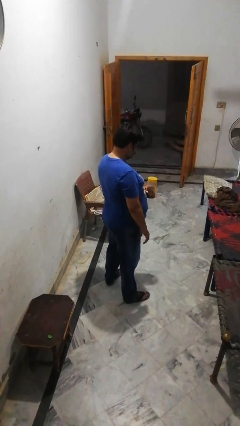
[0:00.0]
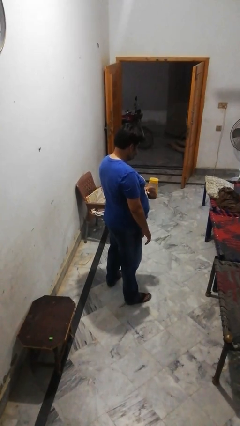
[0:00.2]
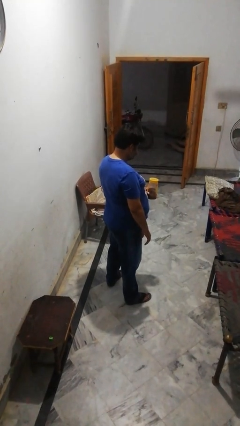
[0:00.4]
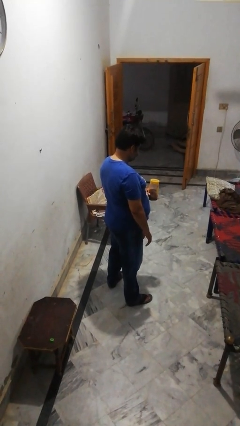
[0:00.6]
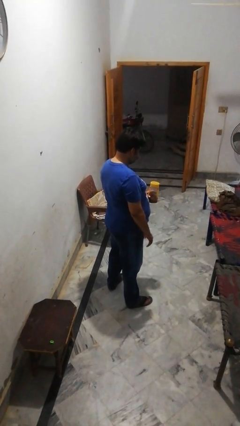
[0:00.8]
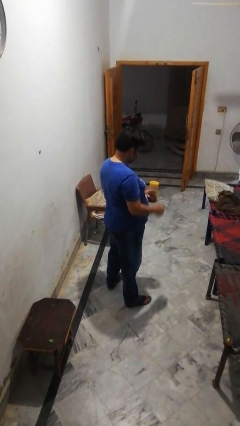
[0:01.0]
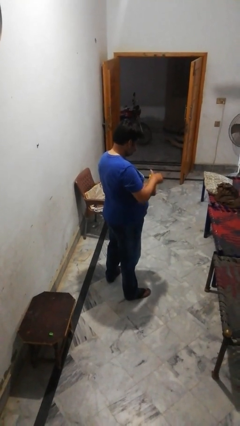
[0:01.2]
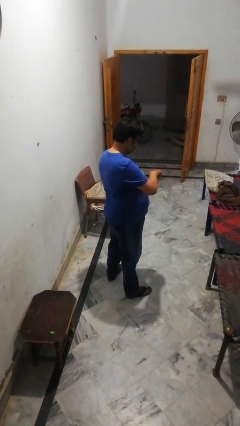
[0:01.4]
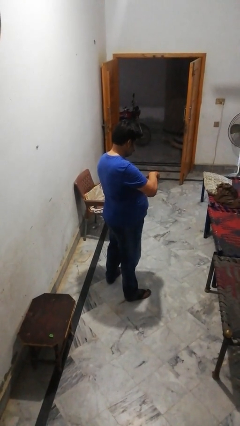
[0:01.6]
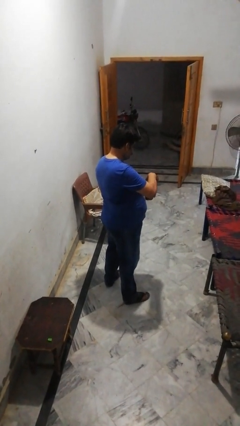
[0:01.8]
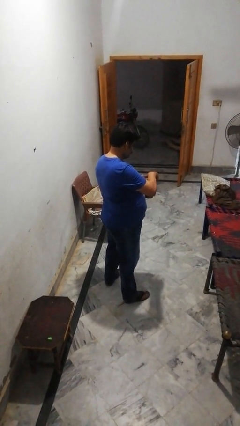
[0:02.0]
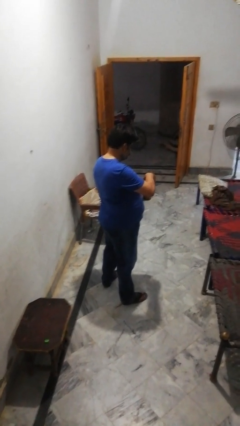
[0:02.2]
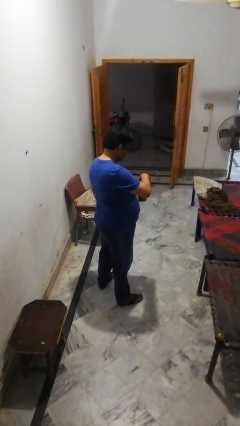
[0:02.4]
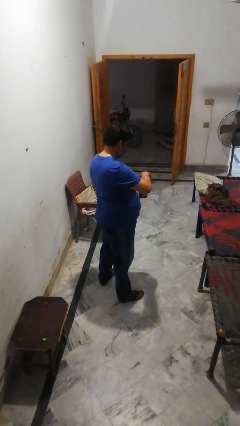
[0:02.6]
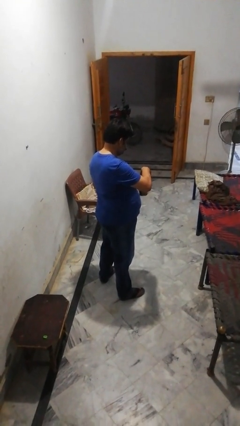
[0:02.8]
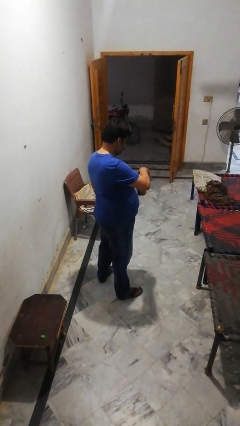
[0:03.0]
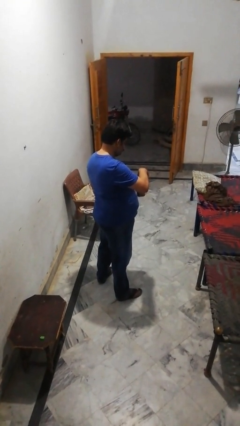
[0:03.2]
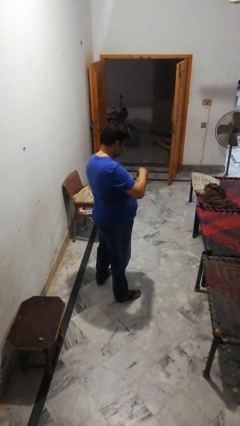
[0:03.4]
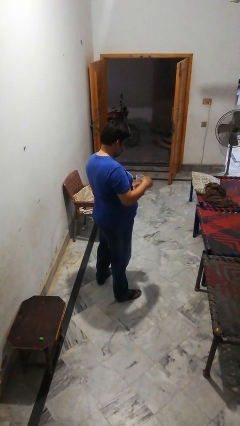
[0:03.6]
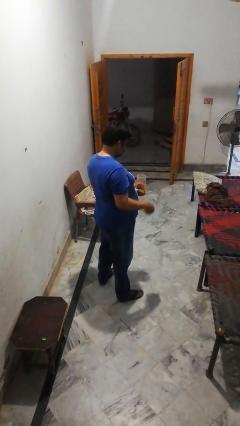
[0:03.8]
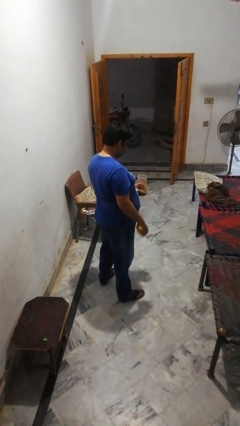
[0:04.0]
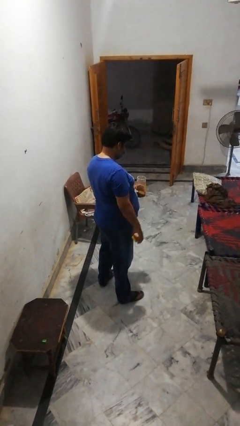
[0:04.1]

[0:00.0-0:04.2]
person opens jar

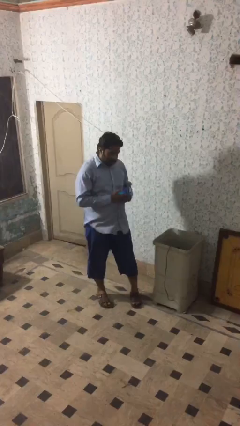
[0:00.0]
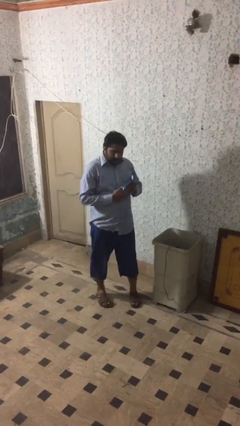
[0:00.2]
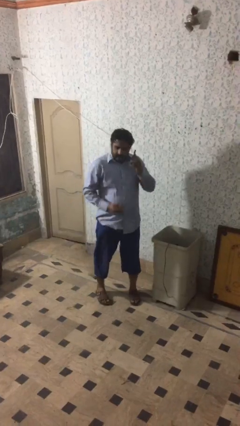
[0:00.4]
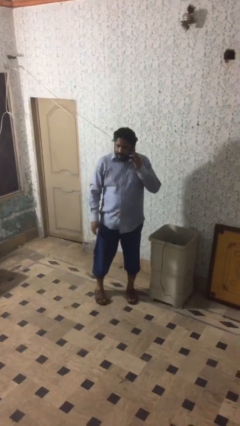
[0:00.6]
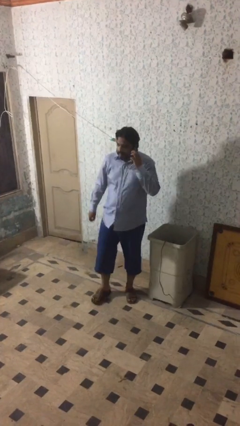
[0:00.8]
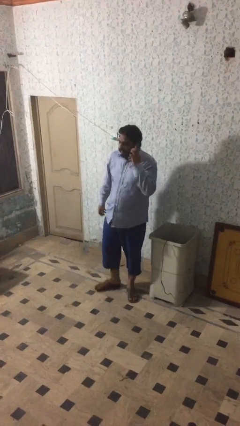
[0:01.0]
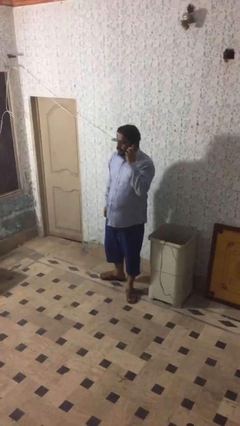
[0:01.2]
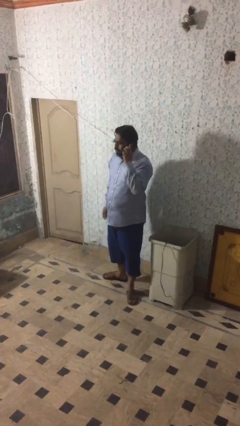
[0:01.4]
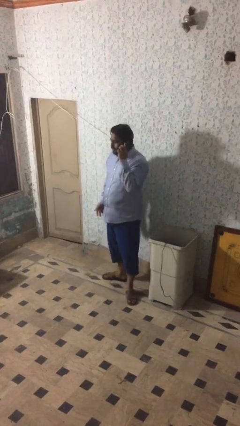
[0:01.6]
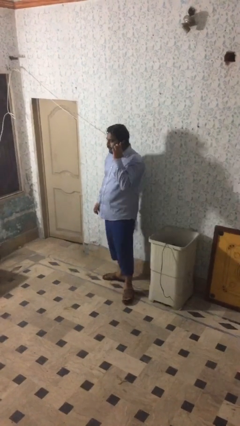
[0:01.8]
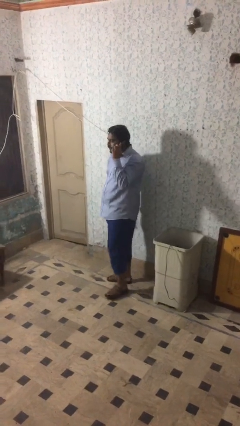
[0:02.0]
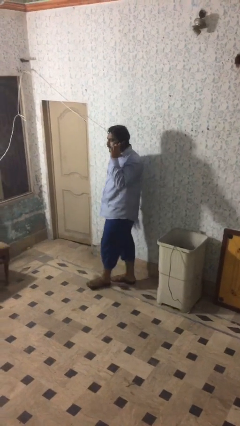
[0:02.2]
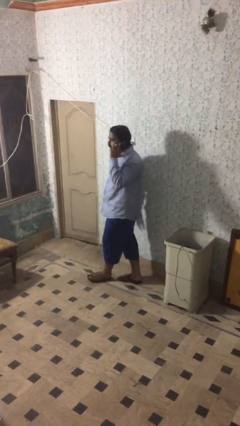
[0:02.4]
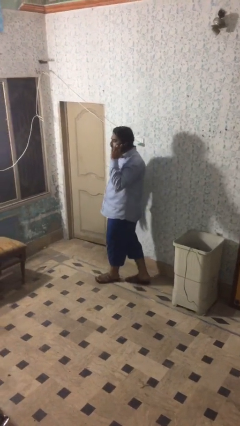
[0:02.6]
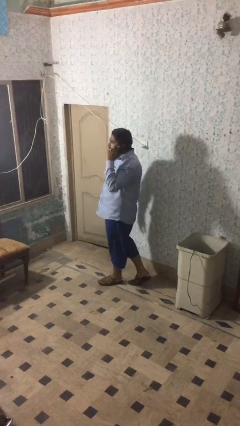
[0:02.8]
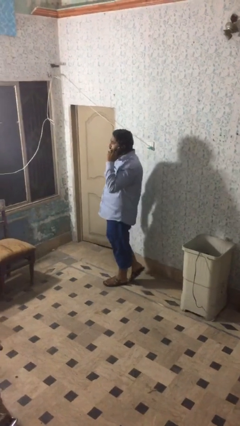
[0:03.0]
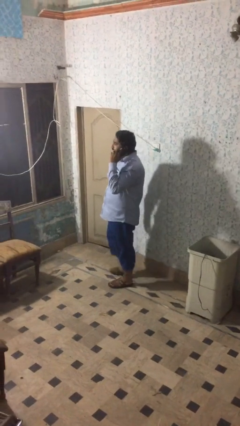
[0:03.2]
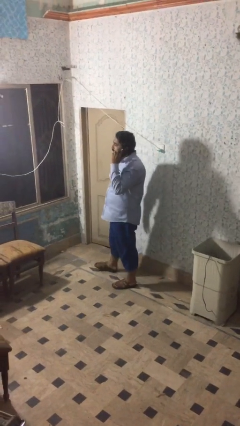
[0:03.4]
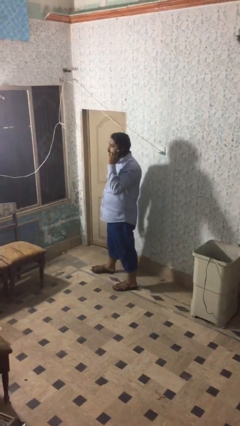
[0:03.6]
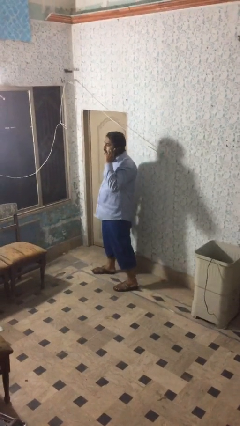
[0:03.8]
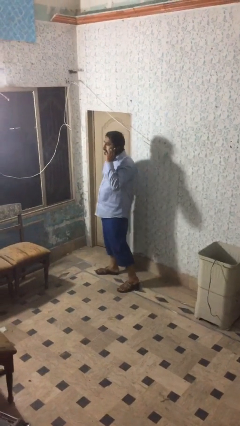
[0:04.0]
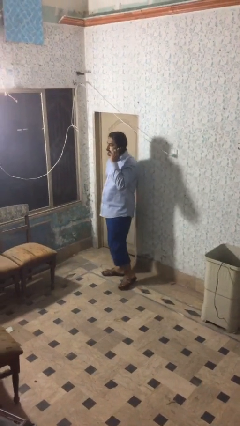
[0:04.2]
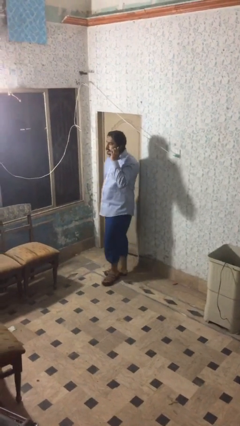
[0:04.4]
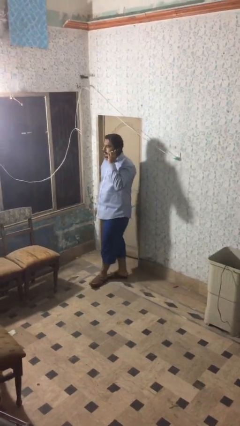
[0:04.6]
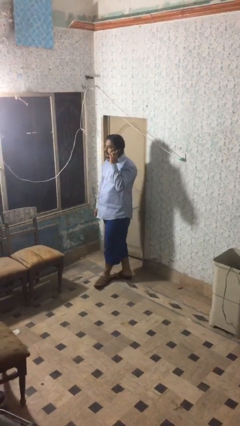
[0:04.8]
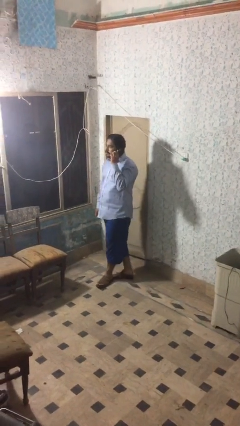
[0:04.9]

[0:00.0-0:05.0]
person talks on phone

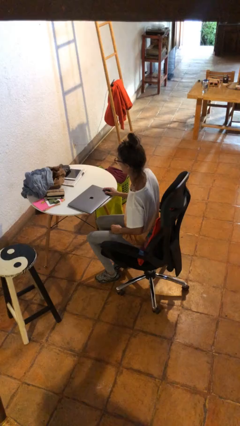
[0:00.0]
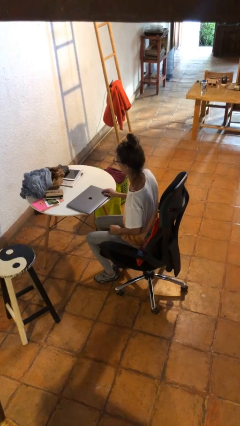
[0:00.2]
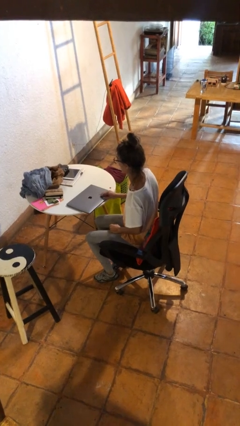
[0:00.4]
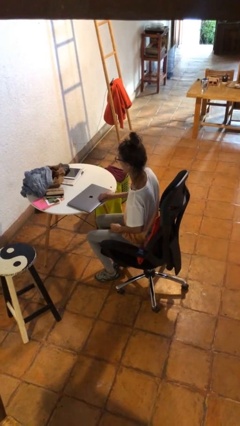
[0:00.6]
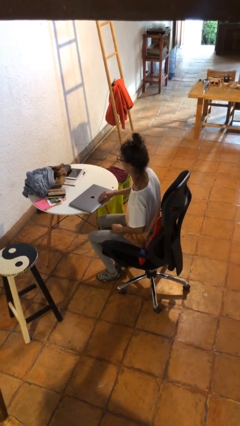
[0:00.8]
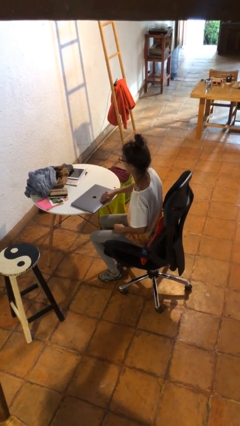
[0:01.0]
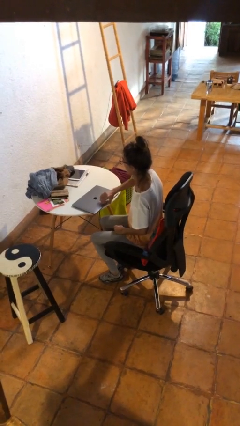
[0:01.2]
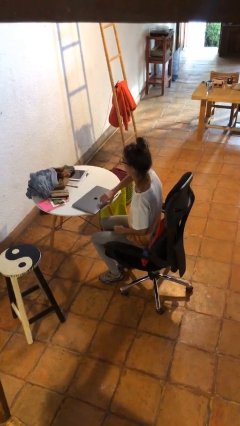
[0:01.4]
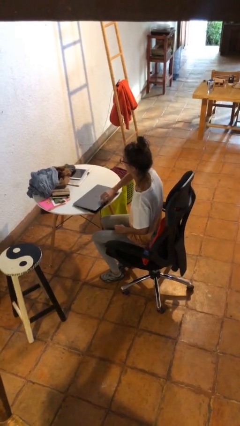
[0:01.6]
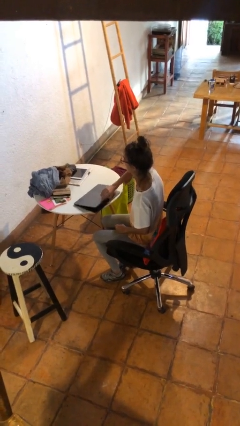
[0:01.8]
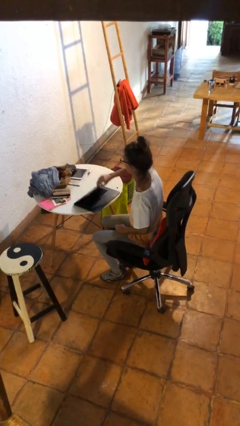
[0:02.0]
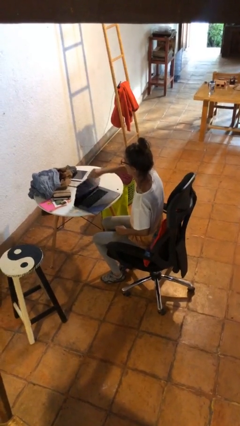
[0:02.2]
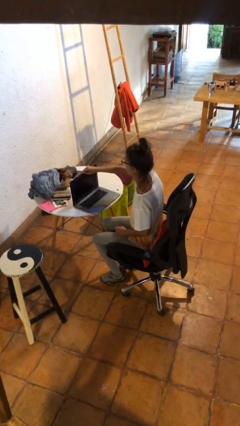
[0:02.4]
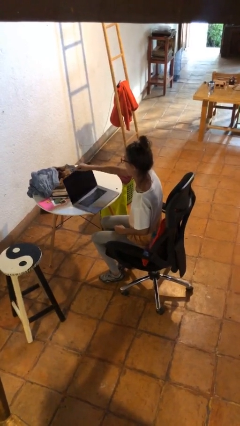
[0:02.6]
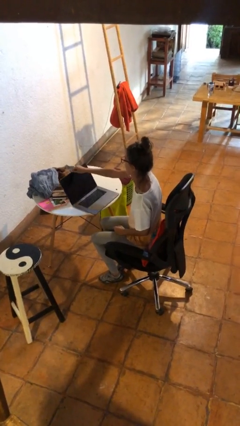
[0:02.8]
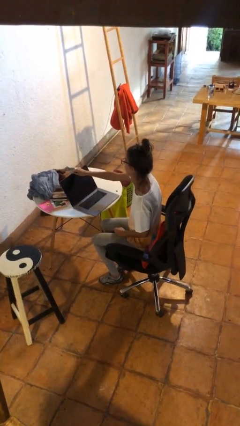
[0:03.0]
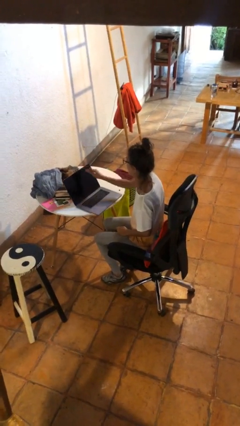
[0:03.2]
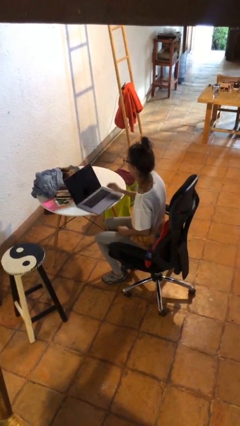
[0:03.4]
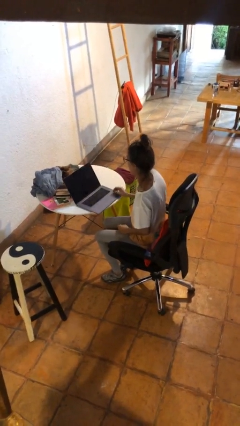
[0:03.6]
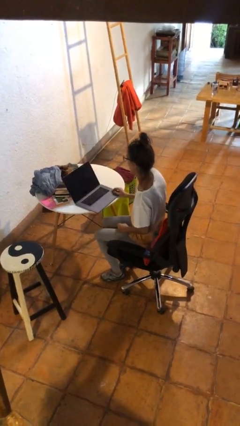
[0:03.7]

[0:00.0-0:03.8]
person opens laptop

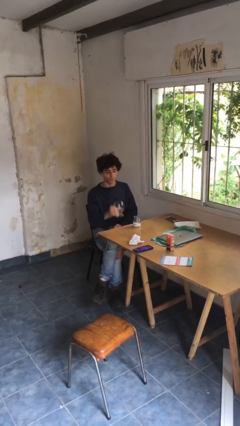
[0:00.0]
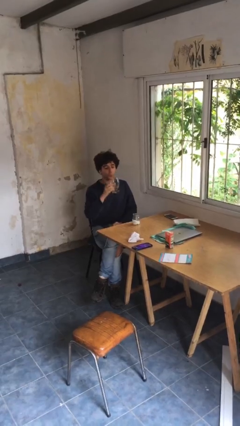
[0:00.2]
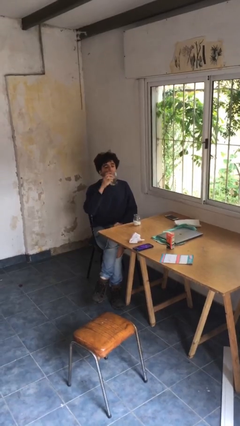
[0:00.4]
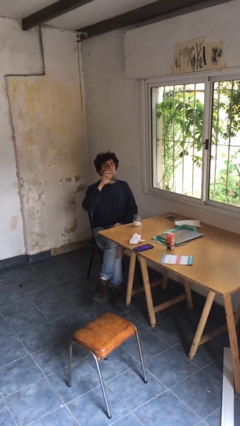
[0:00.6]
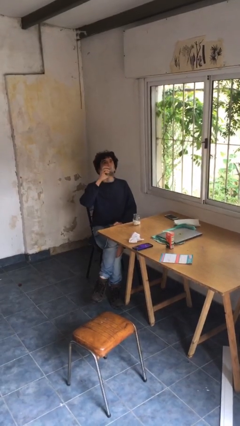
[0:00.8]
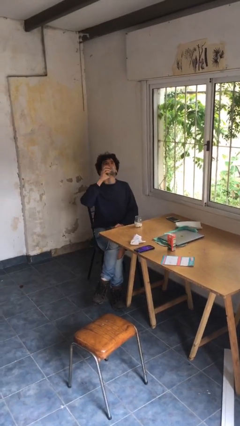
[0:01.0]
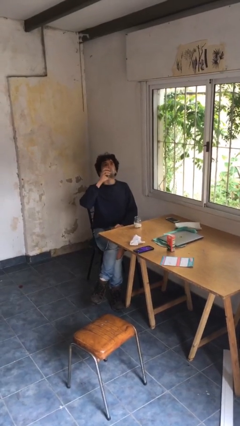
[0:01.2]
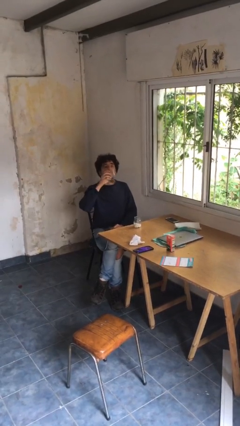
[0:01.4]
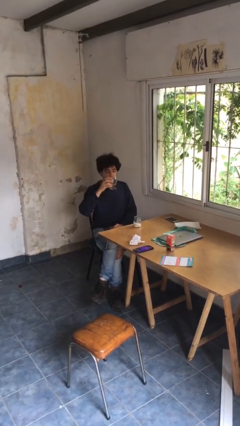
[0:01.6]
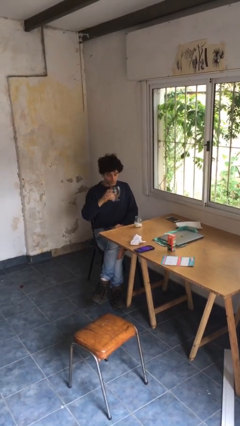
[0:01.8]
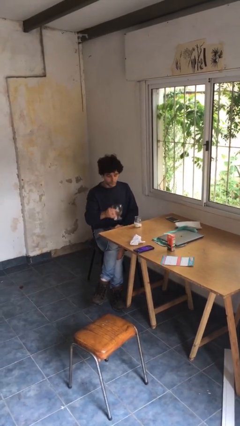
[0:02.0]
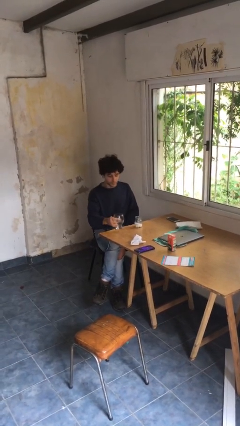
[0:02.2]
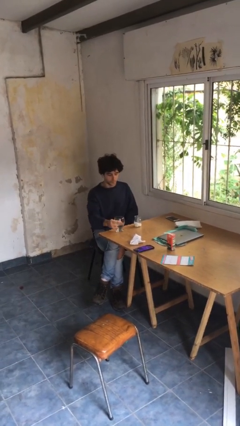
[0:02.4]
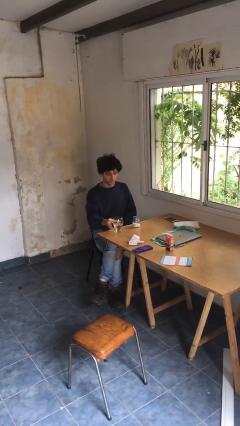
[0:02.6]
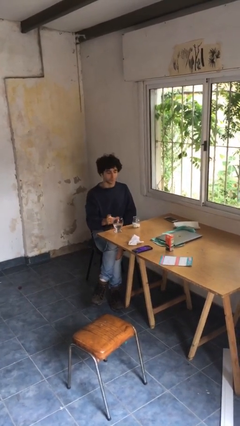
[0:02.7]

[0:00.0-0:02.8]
person drinks from cup

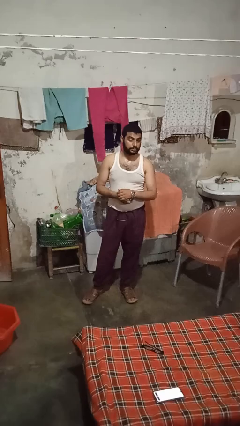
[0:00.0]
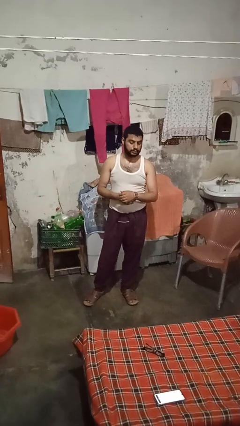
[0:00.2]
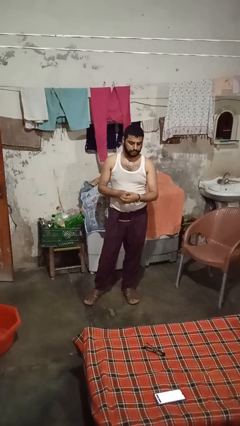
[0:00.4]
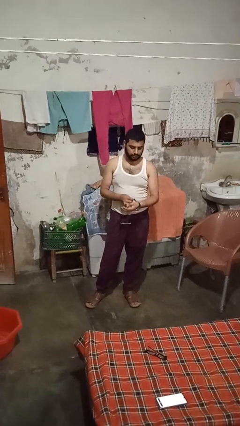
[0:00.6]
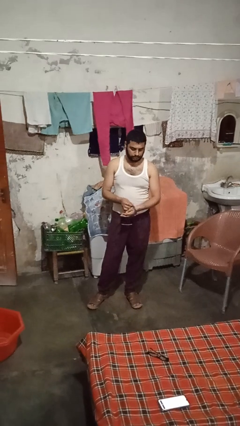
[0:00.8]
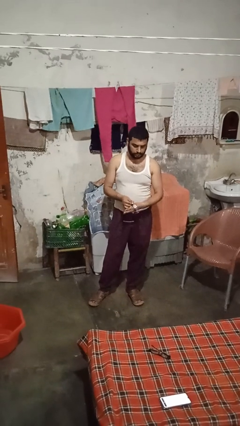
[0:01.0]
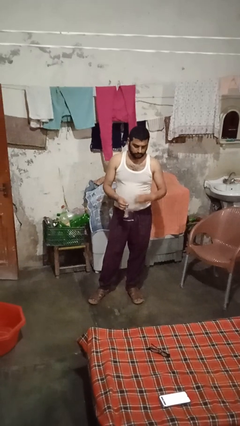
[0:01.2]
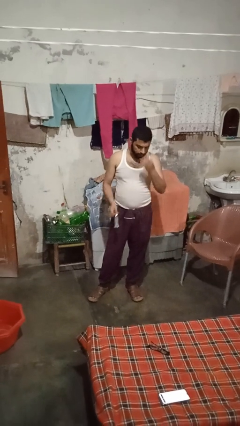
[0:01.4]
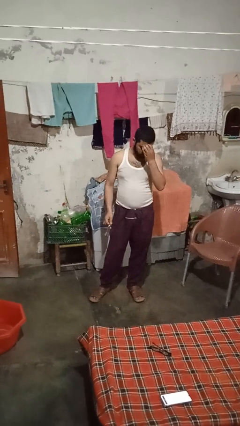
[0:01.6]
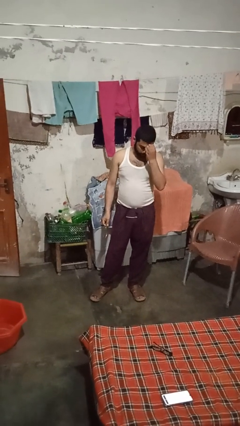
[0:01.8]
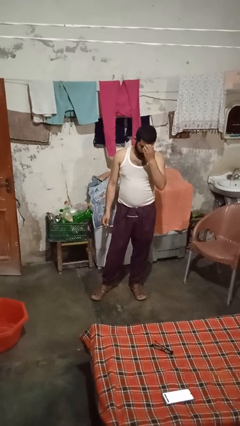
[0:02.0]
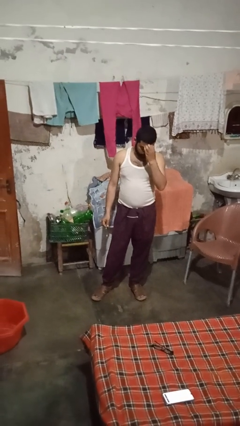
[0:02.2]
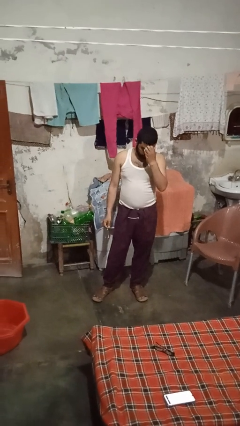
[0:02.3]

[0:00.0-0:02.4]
person takes off wristwatch
